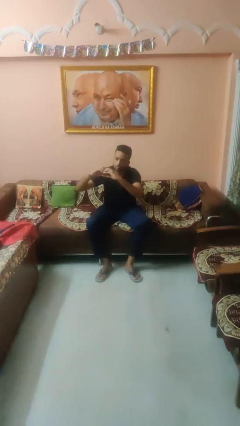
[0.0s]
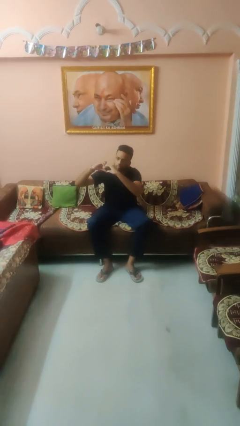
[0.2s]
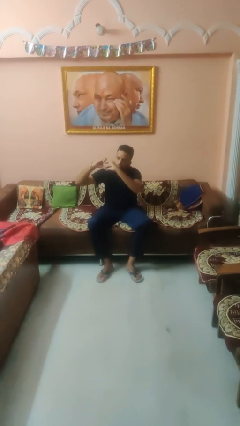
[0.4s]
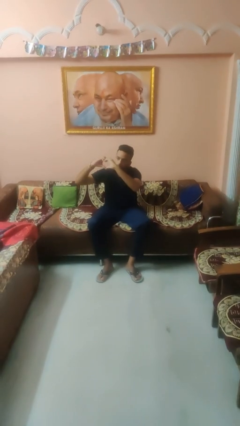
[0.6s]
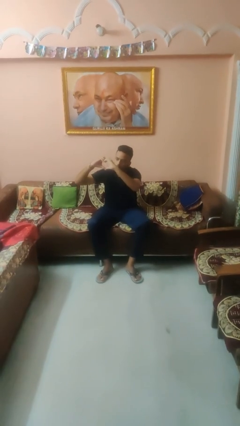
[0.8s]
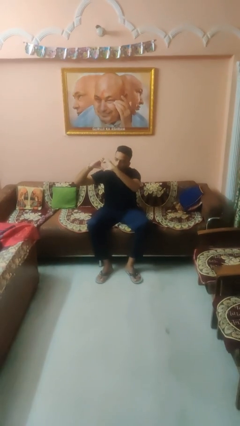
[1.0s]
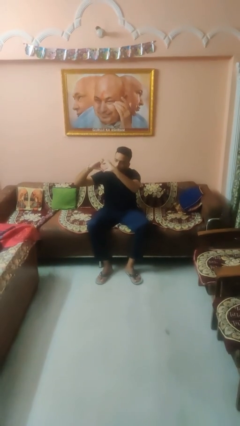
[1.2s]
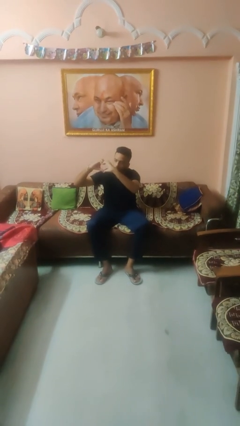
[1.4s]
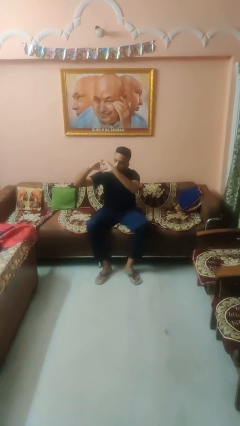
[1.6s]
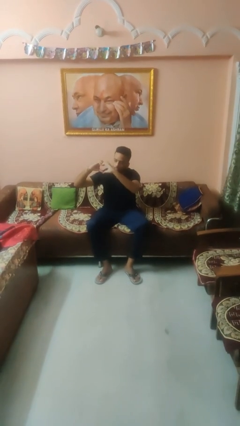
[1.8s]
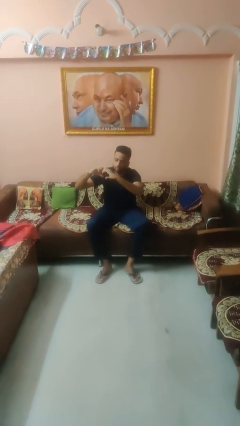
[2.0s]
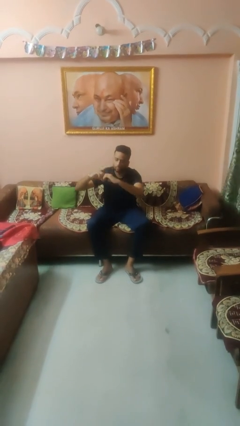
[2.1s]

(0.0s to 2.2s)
person gestures heart

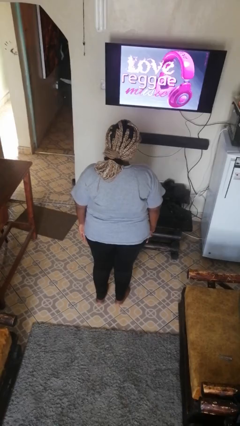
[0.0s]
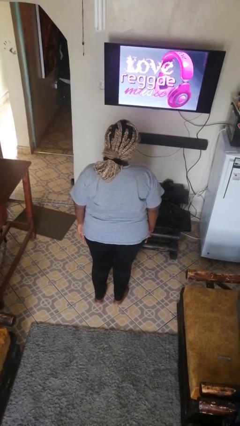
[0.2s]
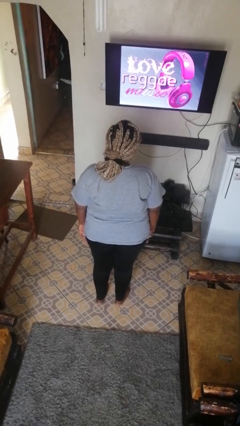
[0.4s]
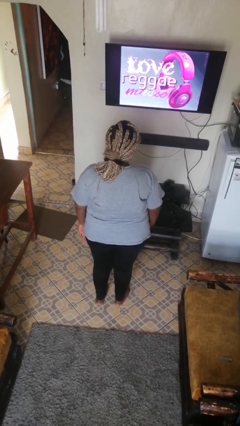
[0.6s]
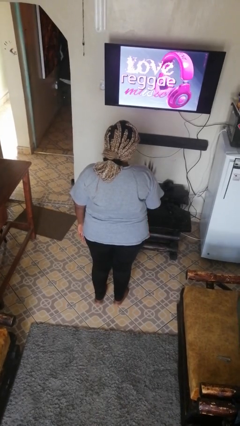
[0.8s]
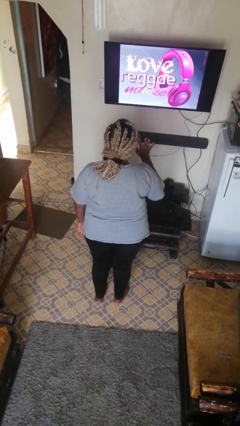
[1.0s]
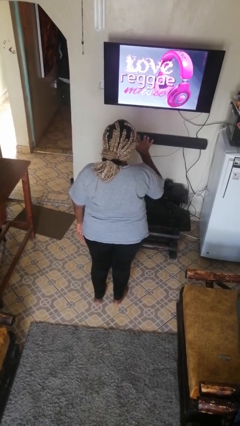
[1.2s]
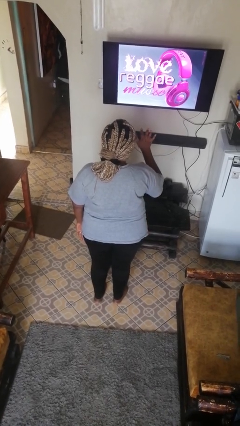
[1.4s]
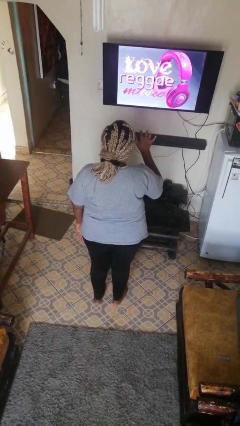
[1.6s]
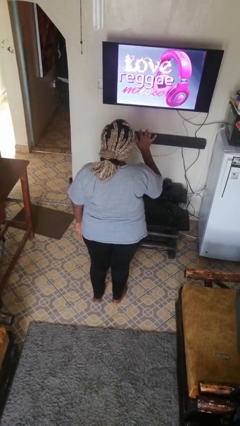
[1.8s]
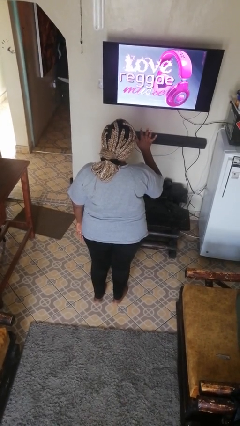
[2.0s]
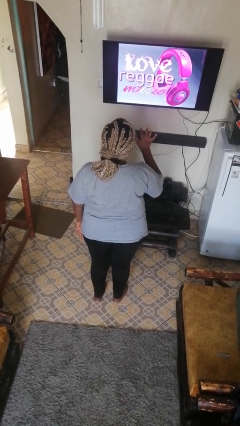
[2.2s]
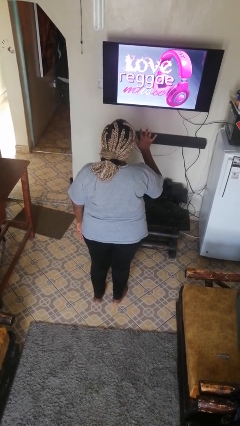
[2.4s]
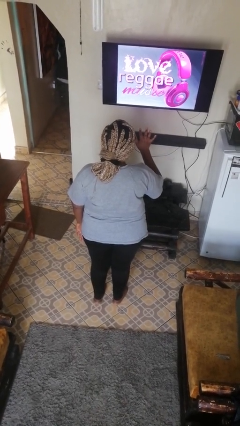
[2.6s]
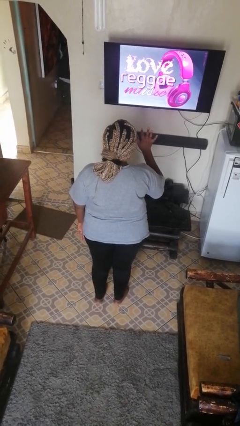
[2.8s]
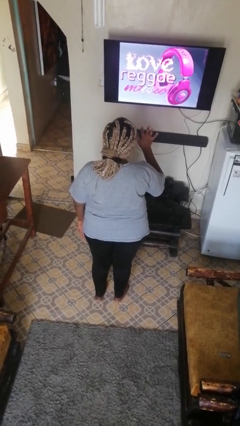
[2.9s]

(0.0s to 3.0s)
person gestures stop

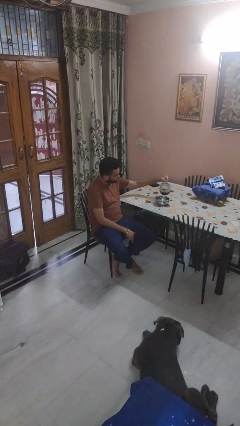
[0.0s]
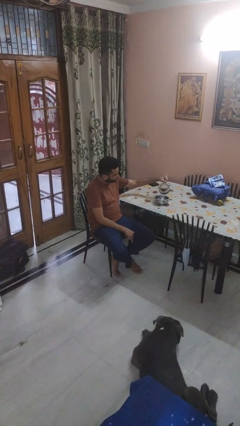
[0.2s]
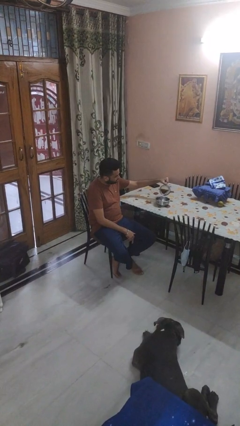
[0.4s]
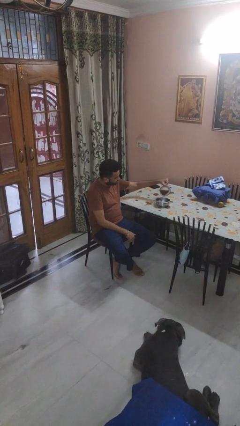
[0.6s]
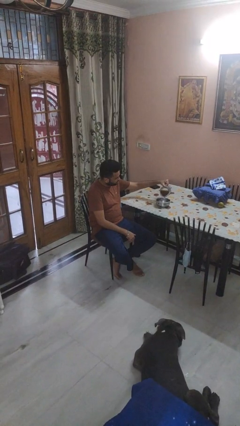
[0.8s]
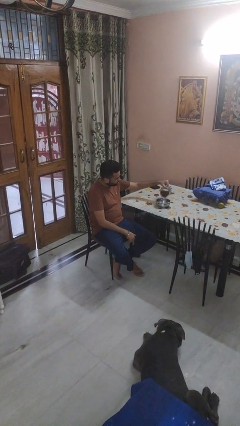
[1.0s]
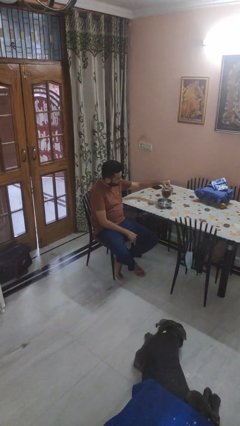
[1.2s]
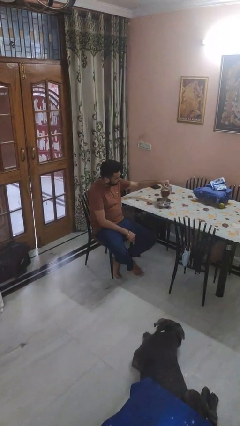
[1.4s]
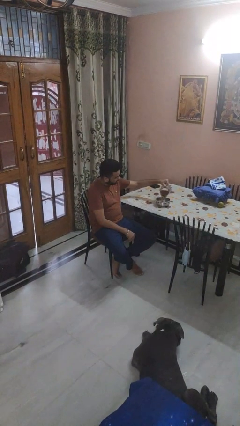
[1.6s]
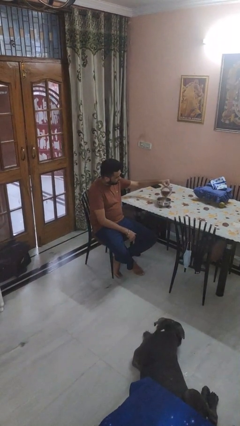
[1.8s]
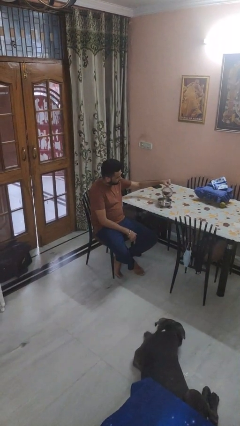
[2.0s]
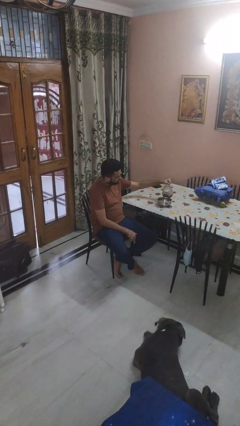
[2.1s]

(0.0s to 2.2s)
person pours into bowl

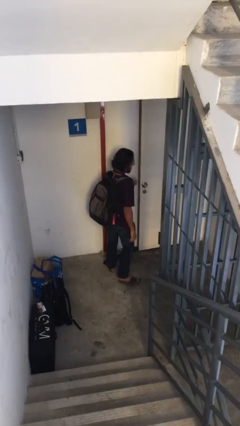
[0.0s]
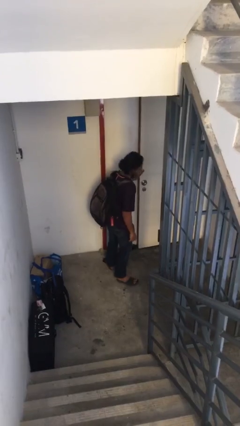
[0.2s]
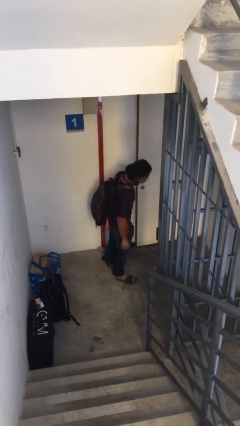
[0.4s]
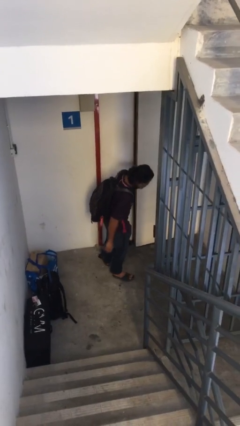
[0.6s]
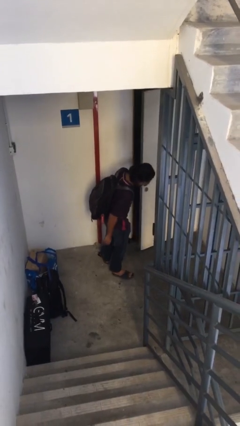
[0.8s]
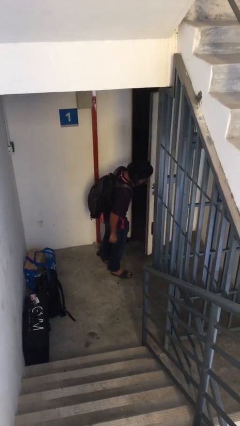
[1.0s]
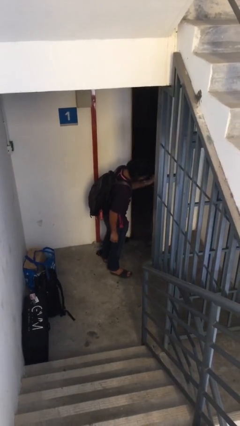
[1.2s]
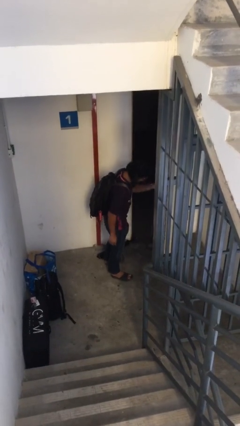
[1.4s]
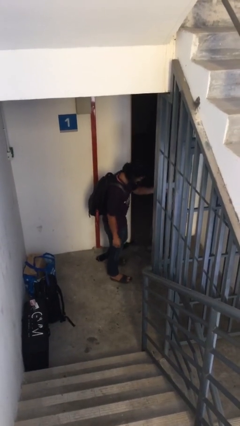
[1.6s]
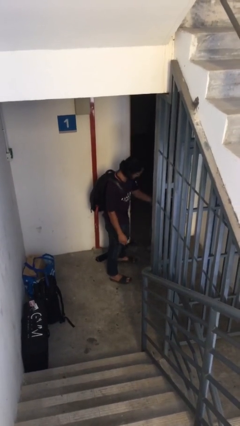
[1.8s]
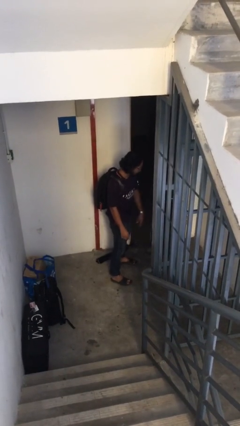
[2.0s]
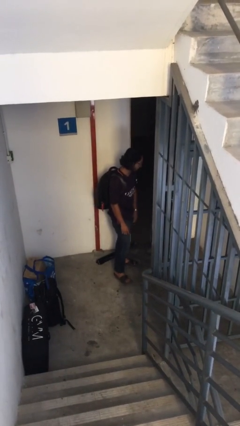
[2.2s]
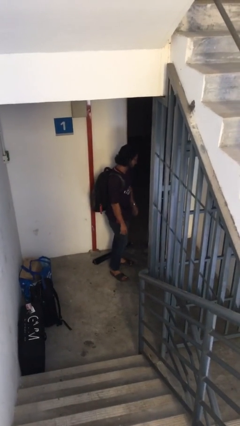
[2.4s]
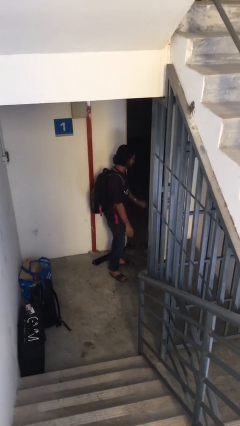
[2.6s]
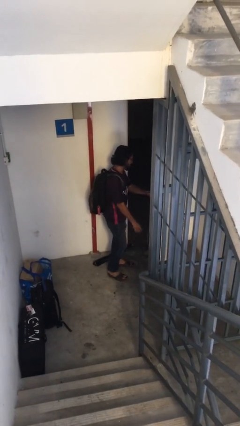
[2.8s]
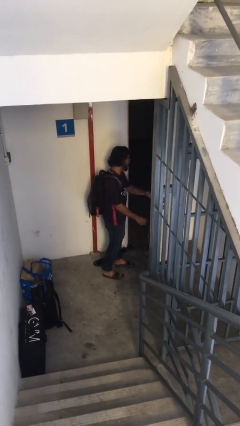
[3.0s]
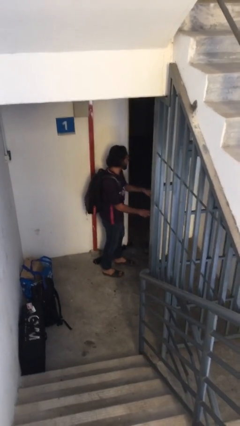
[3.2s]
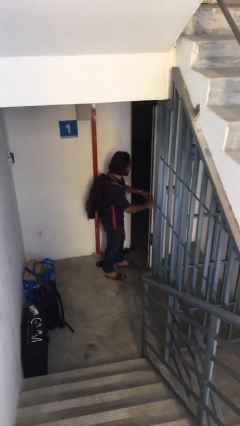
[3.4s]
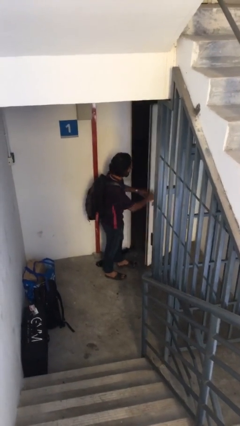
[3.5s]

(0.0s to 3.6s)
person opens facility door

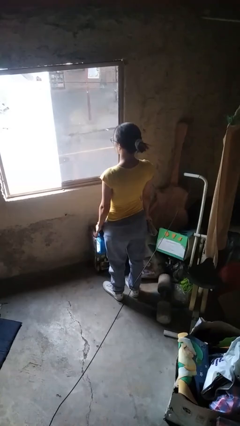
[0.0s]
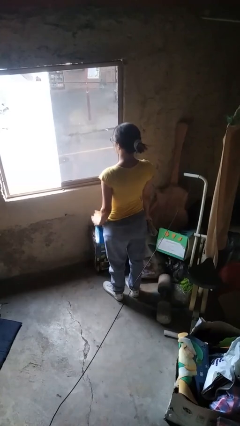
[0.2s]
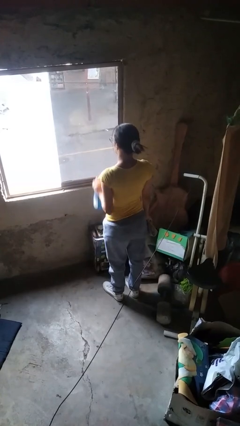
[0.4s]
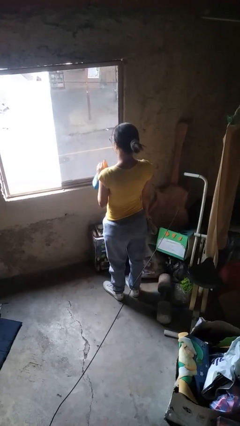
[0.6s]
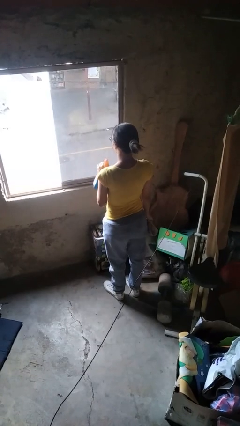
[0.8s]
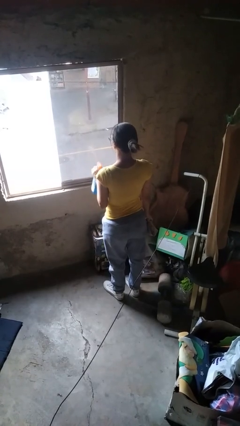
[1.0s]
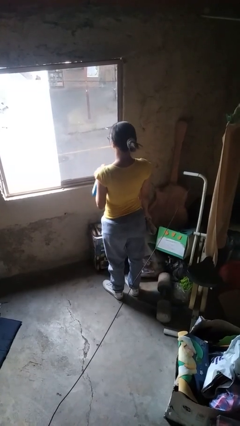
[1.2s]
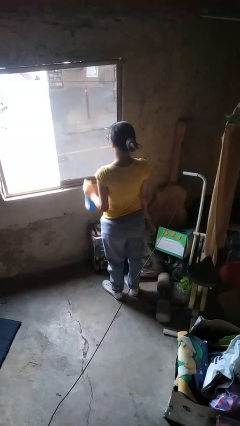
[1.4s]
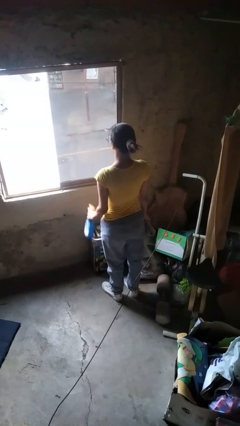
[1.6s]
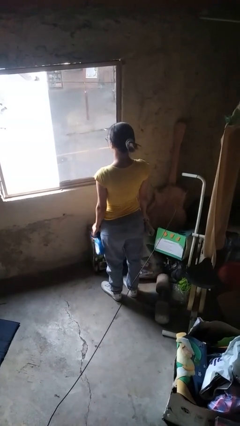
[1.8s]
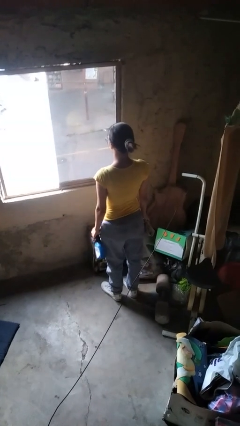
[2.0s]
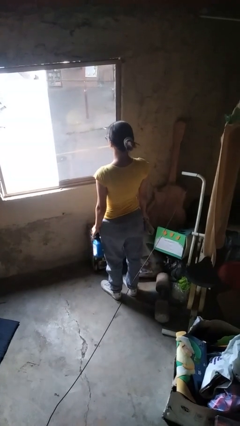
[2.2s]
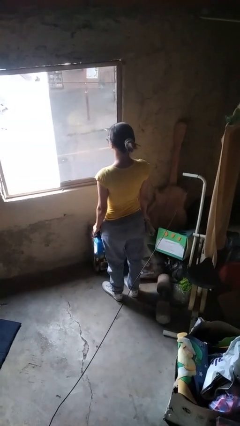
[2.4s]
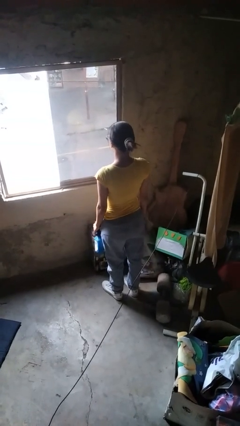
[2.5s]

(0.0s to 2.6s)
person sprays from bottle

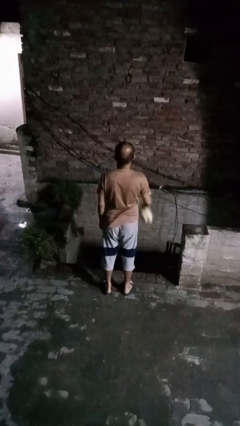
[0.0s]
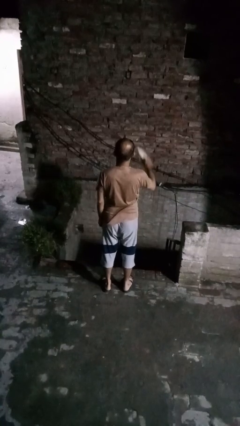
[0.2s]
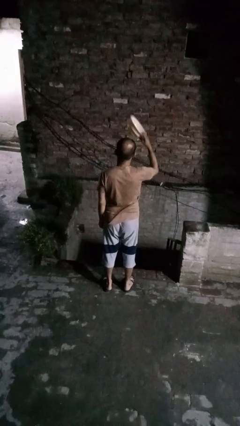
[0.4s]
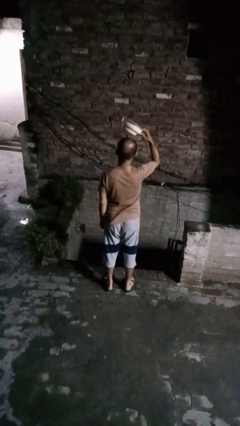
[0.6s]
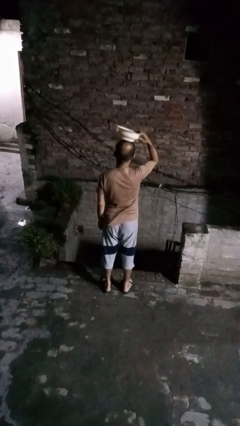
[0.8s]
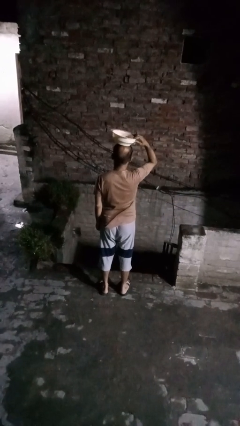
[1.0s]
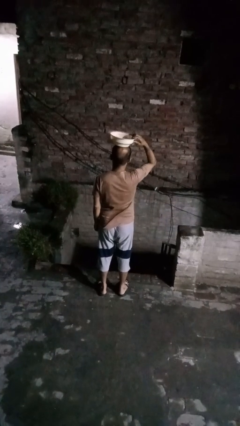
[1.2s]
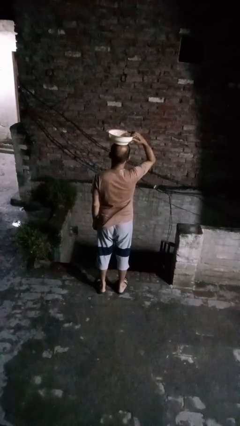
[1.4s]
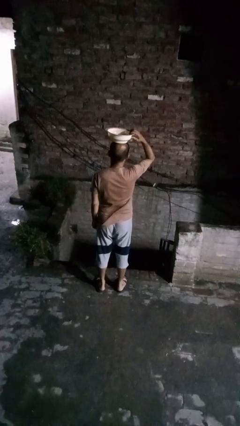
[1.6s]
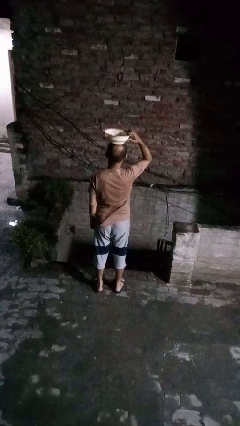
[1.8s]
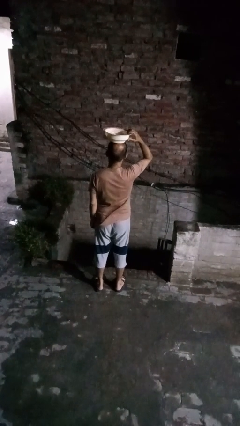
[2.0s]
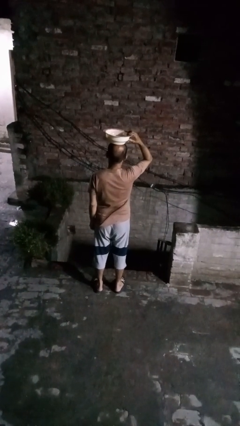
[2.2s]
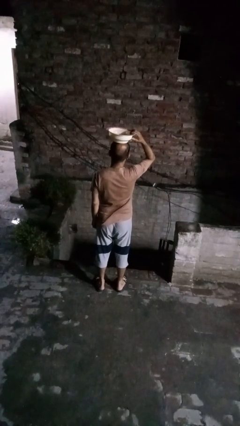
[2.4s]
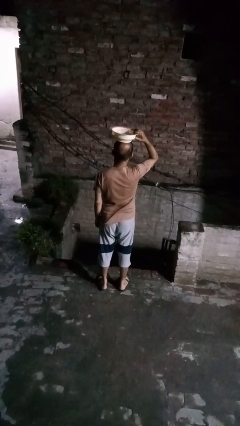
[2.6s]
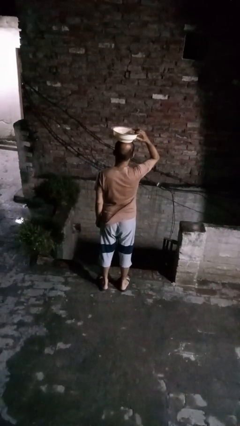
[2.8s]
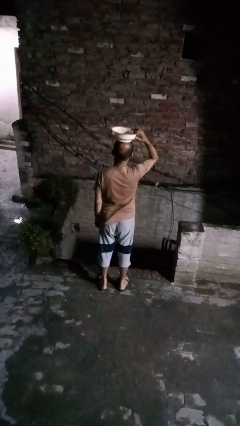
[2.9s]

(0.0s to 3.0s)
person holds object above head

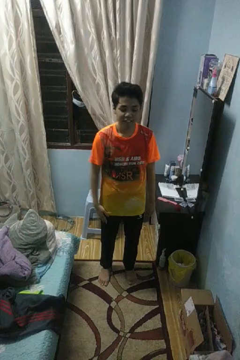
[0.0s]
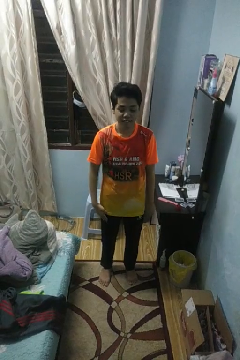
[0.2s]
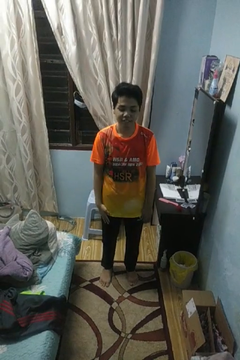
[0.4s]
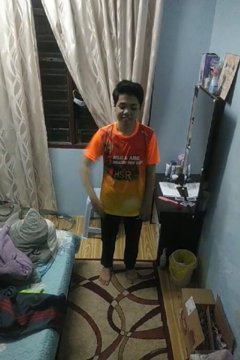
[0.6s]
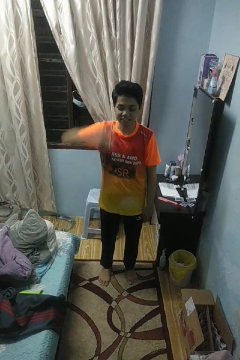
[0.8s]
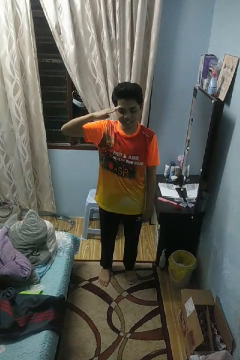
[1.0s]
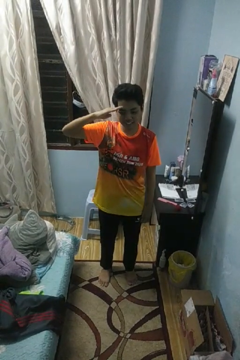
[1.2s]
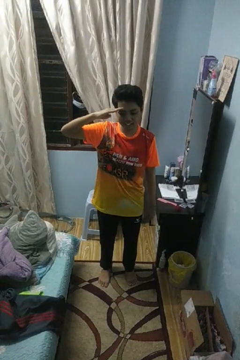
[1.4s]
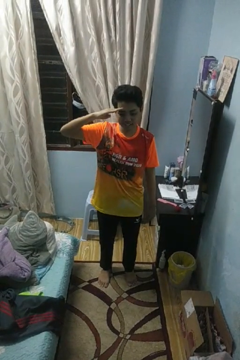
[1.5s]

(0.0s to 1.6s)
person salutes
